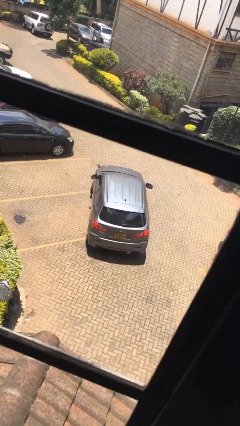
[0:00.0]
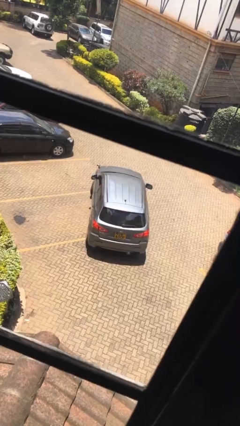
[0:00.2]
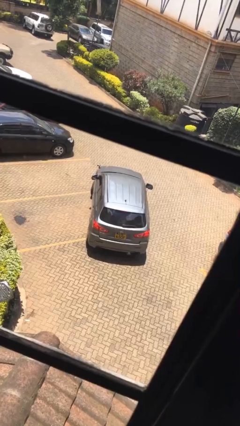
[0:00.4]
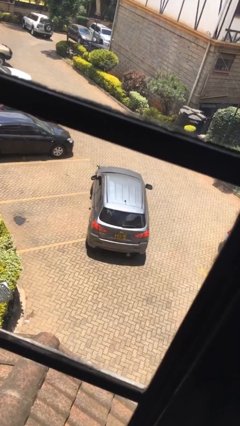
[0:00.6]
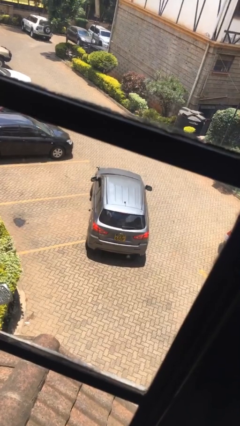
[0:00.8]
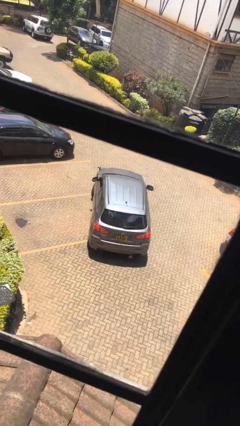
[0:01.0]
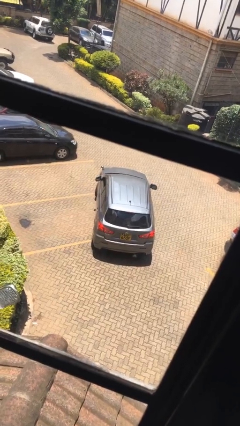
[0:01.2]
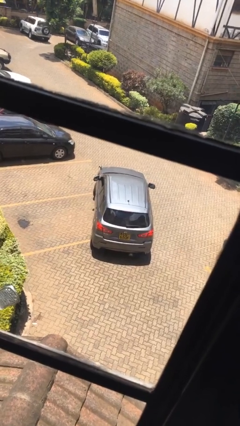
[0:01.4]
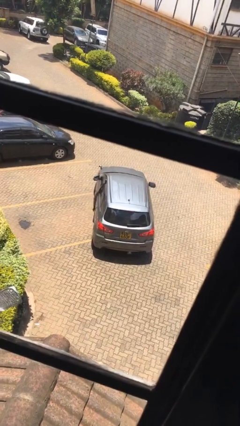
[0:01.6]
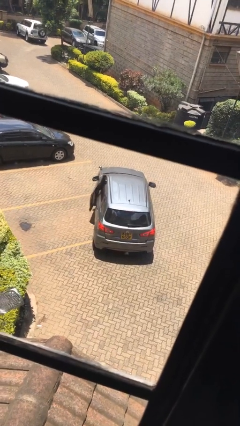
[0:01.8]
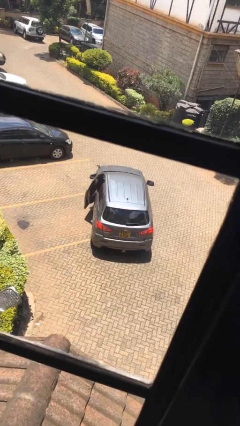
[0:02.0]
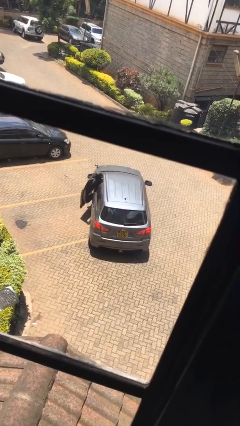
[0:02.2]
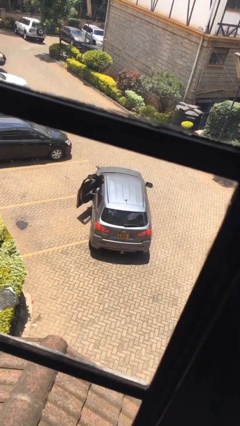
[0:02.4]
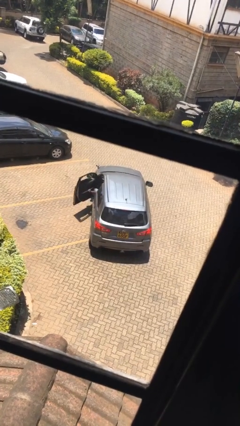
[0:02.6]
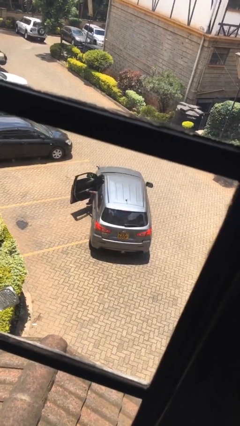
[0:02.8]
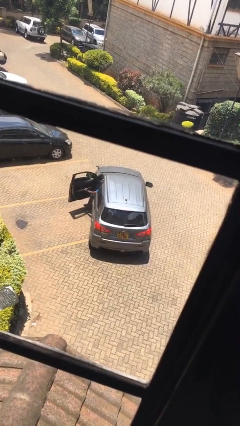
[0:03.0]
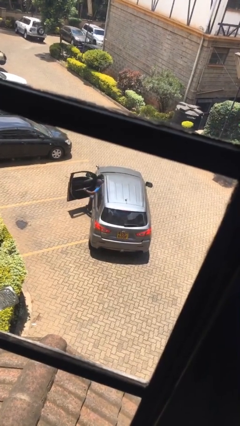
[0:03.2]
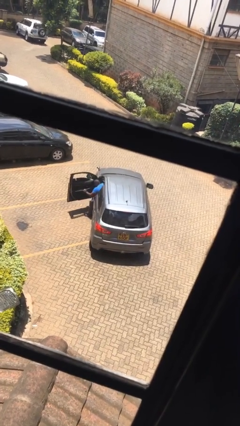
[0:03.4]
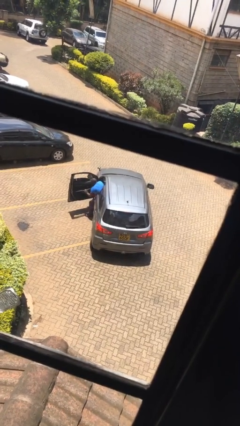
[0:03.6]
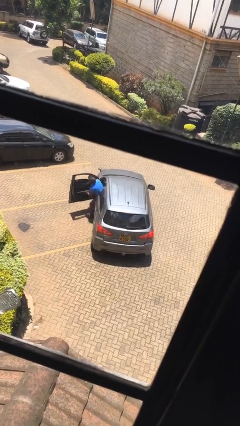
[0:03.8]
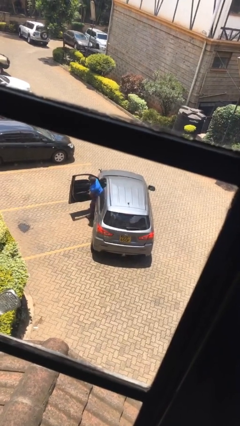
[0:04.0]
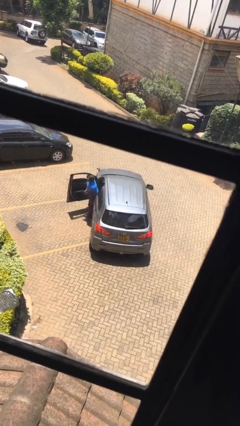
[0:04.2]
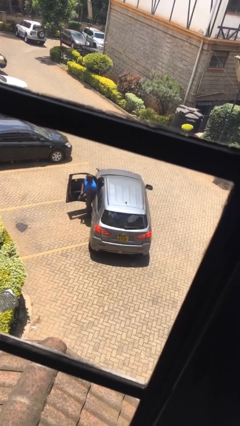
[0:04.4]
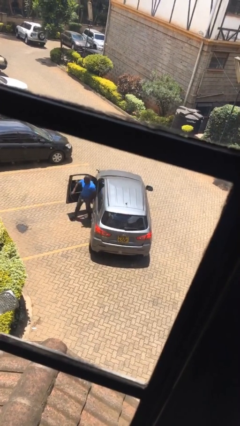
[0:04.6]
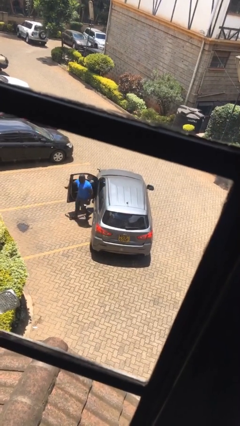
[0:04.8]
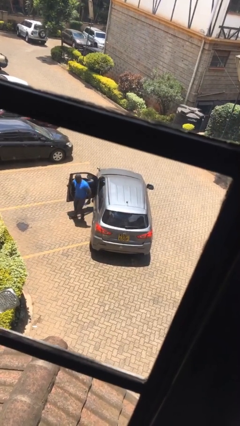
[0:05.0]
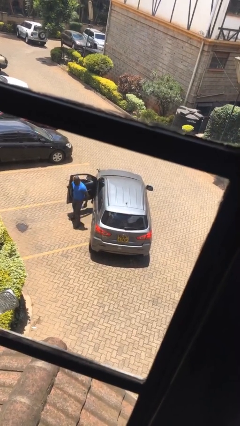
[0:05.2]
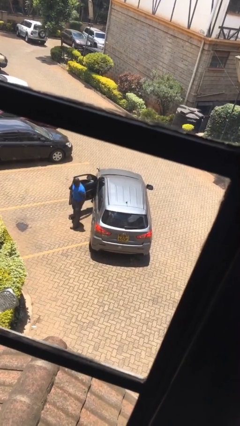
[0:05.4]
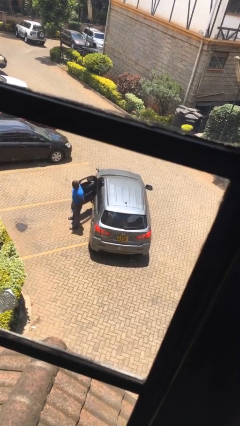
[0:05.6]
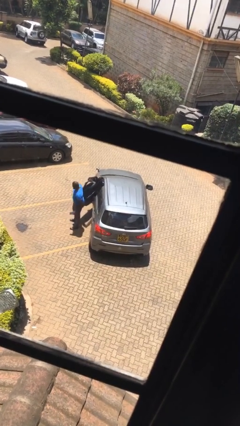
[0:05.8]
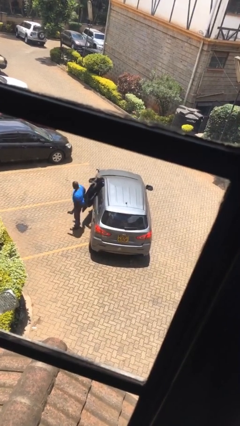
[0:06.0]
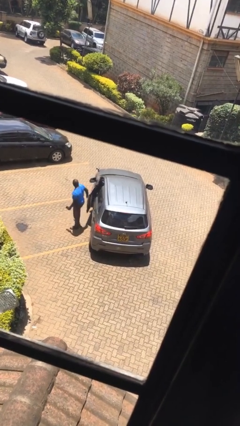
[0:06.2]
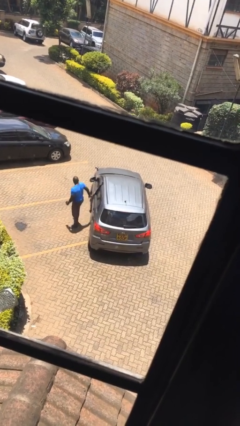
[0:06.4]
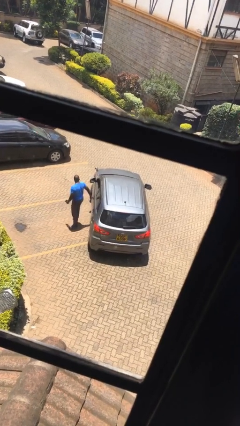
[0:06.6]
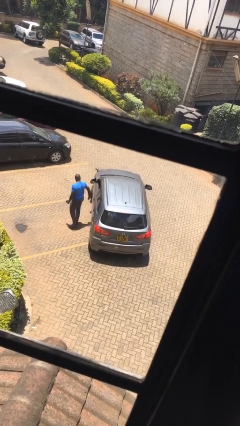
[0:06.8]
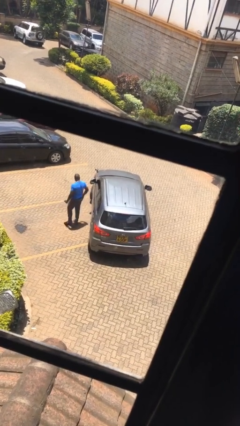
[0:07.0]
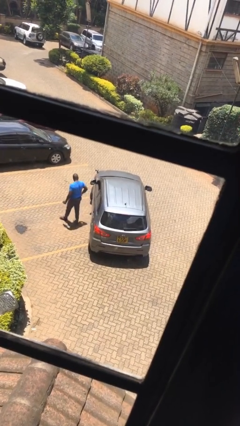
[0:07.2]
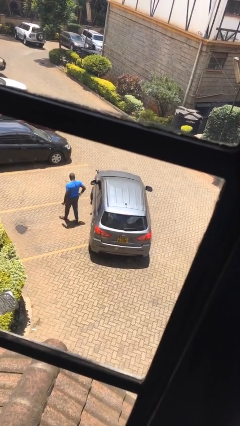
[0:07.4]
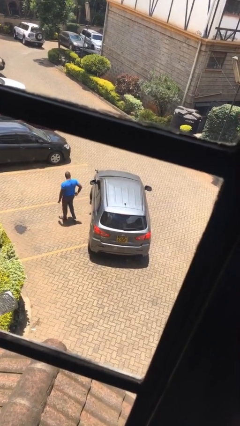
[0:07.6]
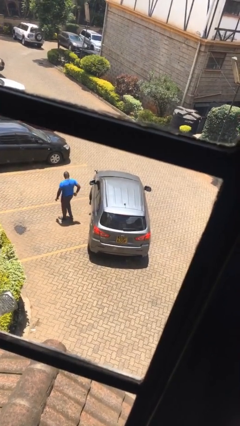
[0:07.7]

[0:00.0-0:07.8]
car drops off person

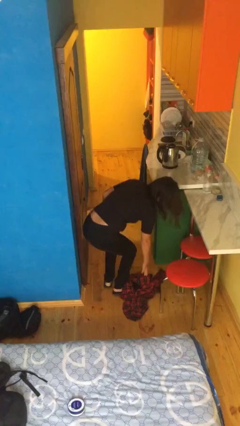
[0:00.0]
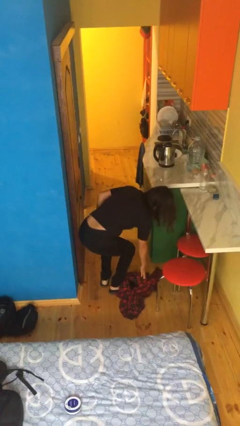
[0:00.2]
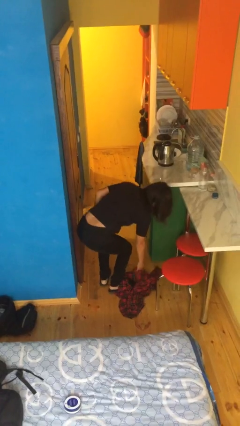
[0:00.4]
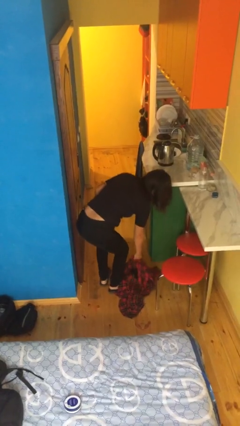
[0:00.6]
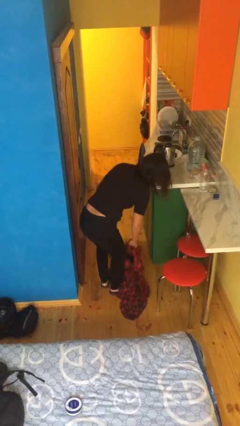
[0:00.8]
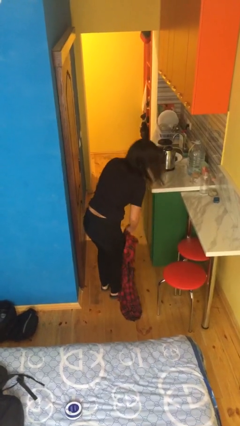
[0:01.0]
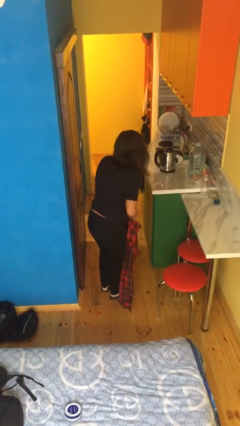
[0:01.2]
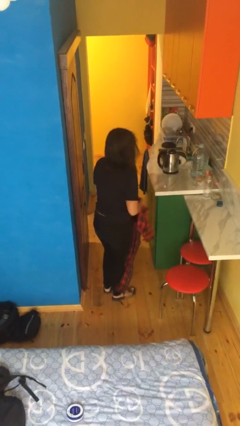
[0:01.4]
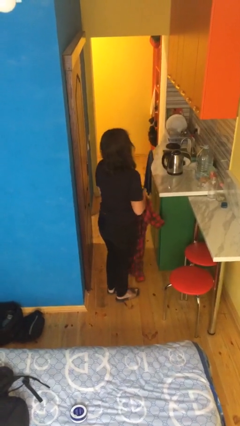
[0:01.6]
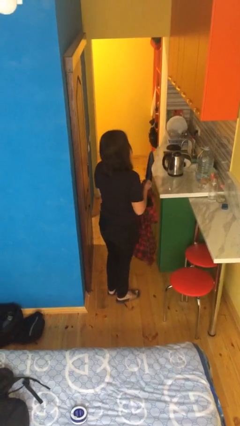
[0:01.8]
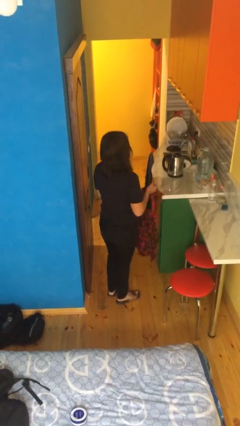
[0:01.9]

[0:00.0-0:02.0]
person picks up object from floor

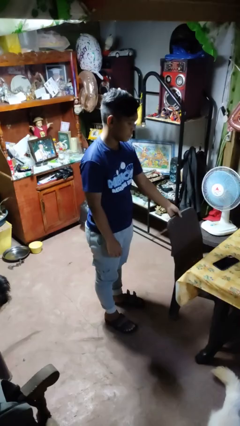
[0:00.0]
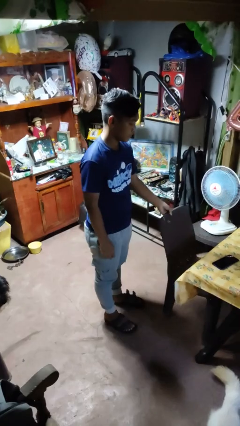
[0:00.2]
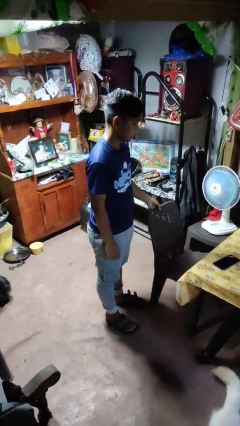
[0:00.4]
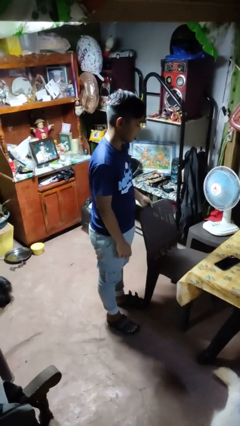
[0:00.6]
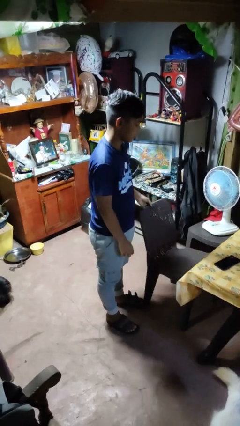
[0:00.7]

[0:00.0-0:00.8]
person pulls out chair

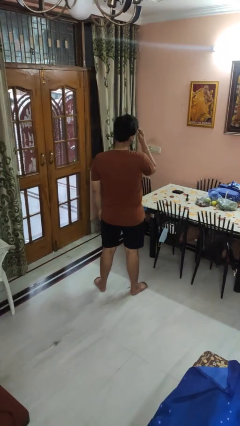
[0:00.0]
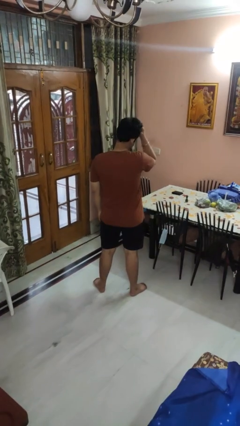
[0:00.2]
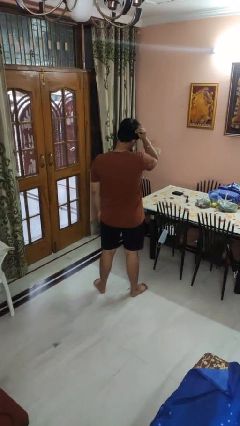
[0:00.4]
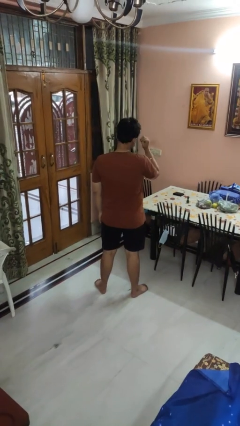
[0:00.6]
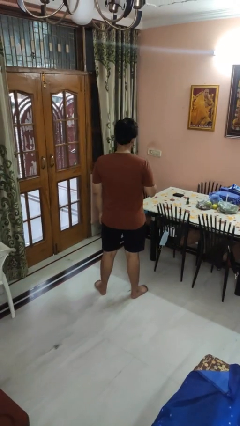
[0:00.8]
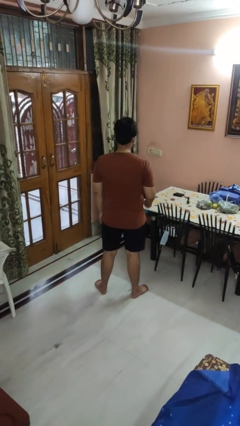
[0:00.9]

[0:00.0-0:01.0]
person strokes hair

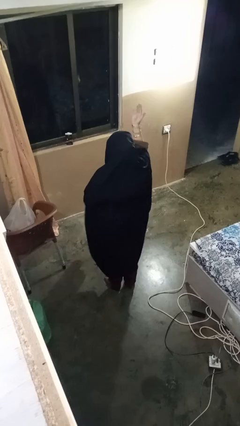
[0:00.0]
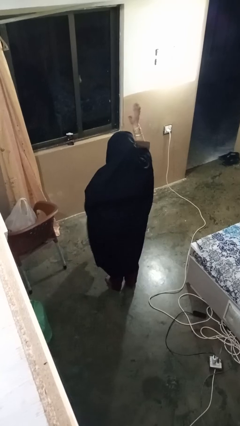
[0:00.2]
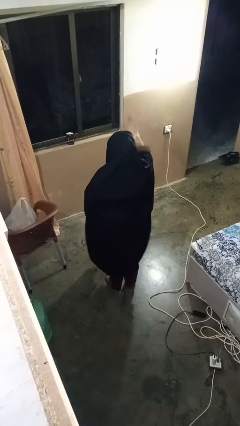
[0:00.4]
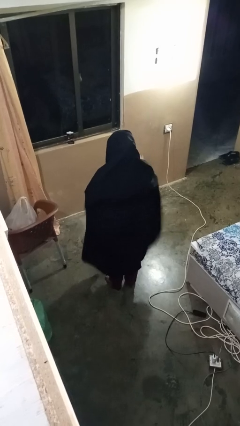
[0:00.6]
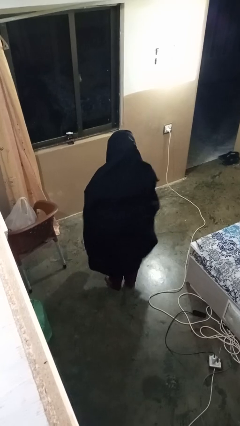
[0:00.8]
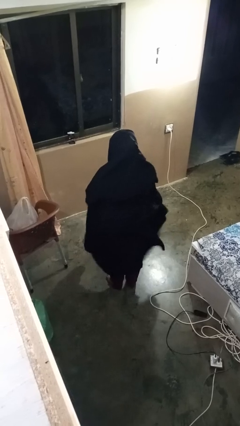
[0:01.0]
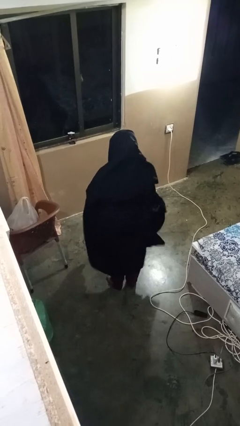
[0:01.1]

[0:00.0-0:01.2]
person gestures swipe down

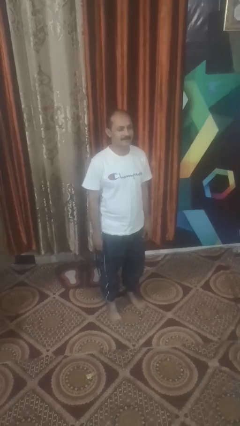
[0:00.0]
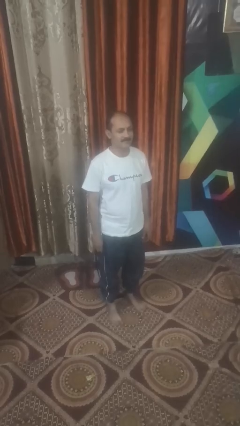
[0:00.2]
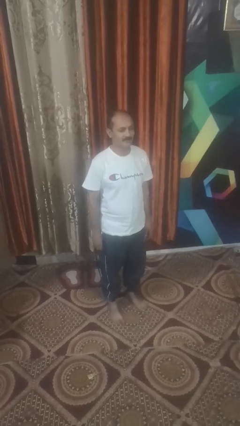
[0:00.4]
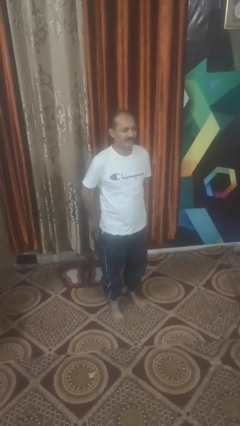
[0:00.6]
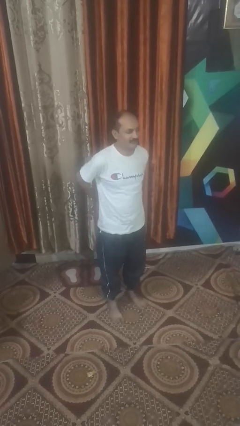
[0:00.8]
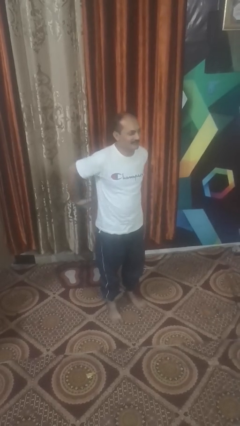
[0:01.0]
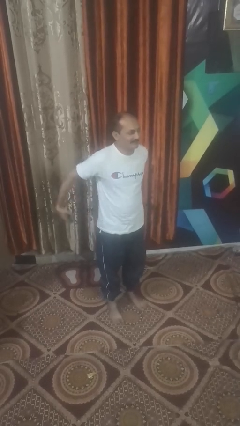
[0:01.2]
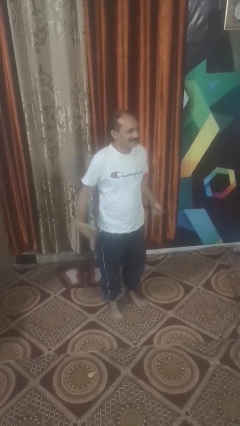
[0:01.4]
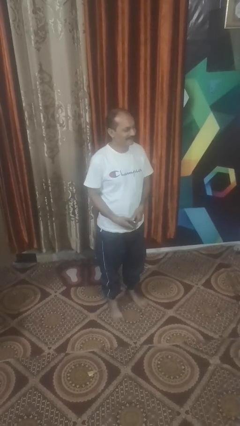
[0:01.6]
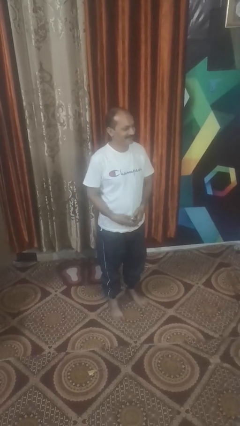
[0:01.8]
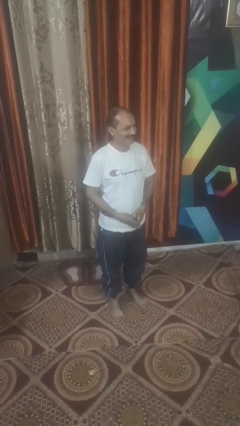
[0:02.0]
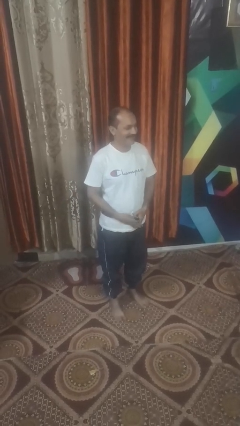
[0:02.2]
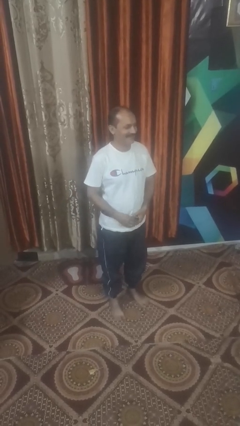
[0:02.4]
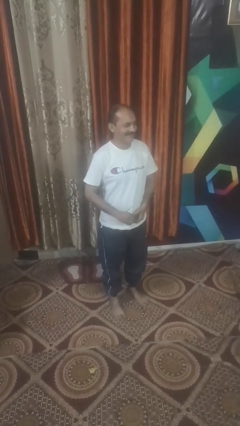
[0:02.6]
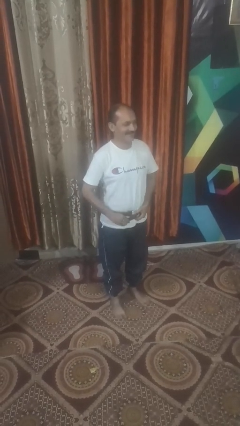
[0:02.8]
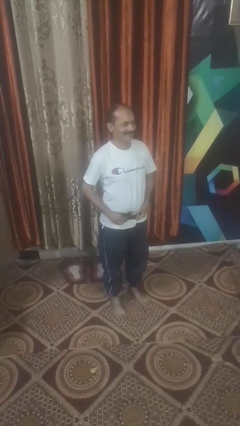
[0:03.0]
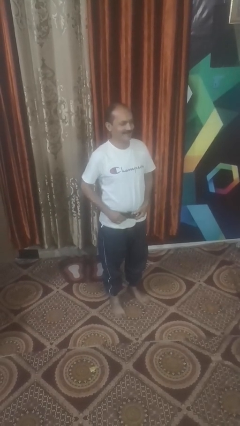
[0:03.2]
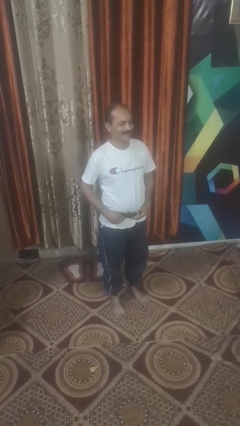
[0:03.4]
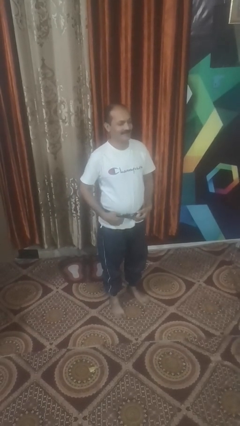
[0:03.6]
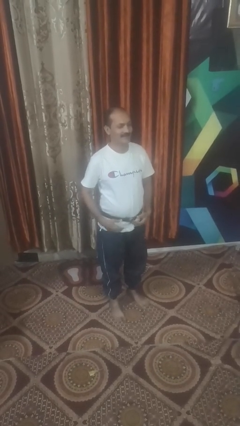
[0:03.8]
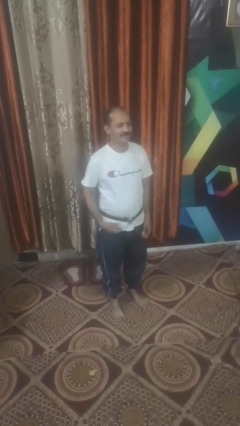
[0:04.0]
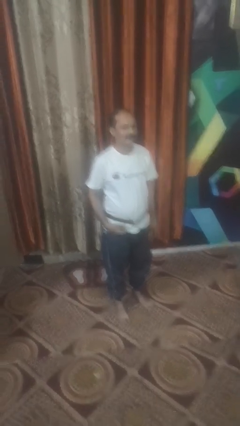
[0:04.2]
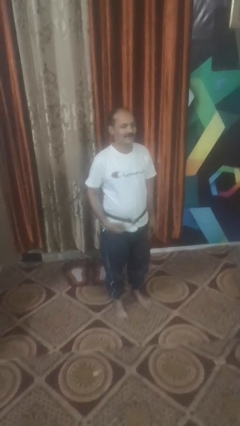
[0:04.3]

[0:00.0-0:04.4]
person puts on belt

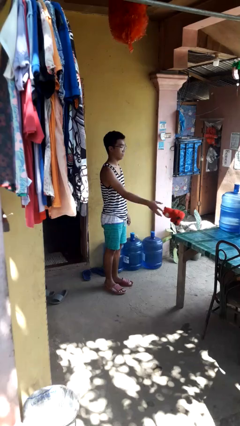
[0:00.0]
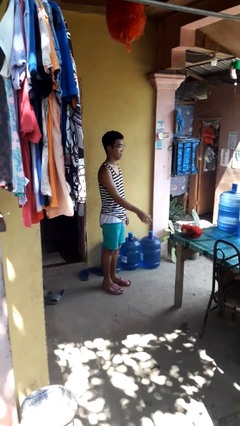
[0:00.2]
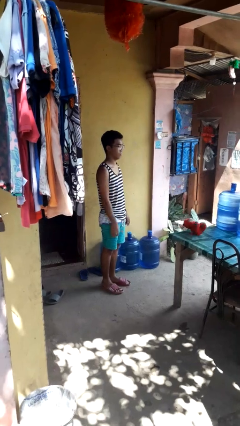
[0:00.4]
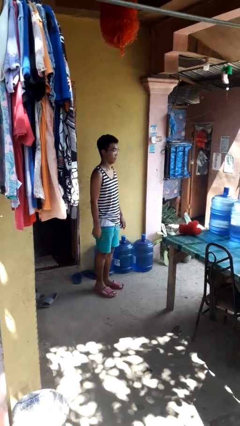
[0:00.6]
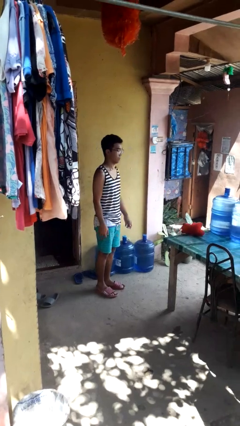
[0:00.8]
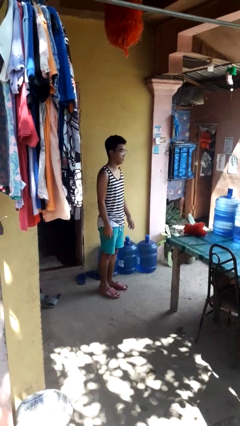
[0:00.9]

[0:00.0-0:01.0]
person throws object on table
